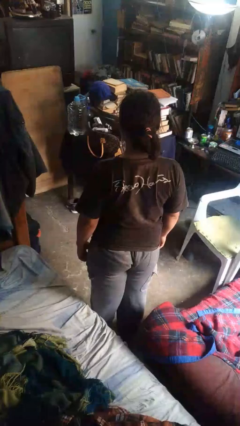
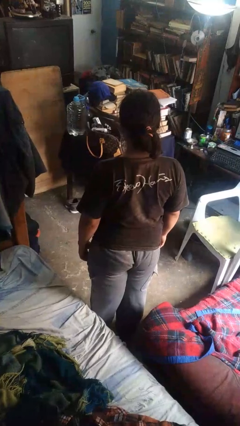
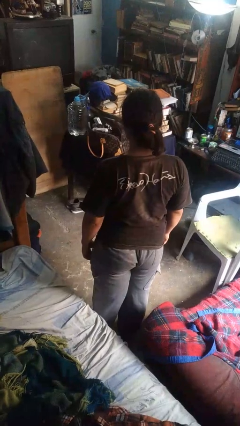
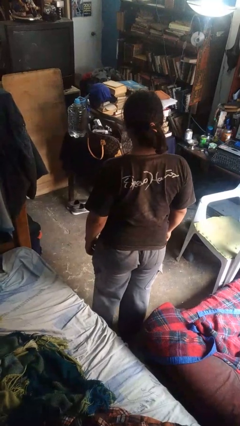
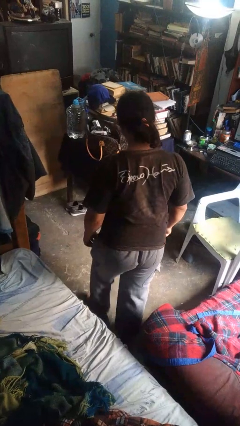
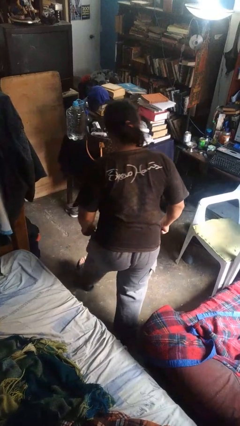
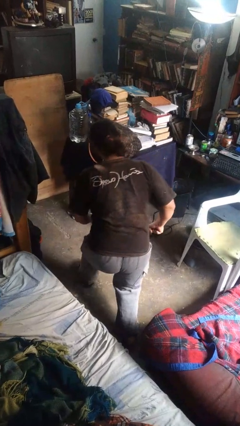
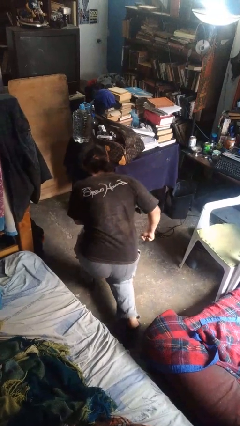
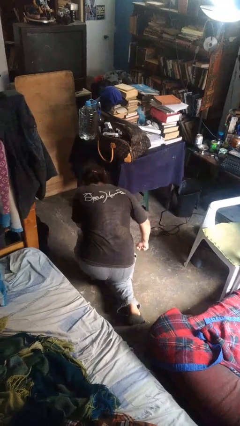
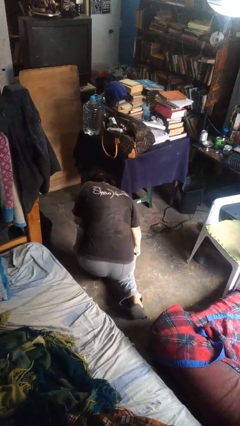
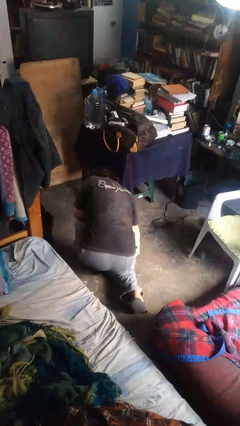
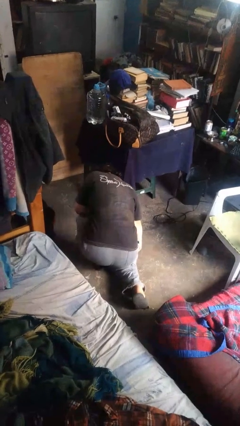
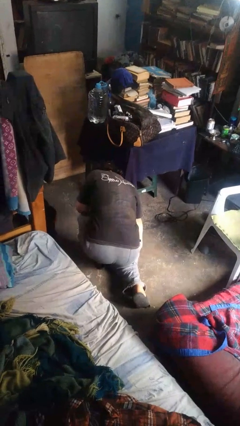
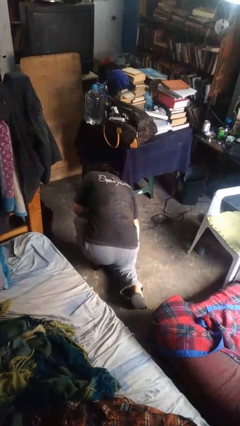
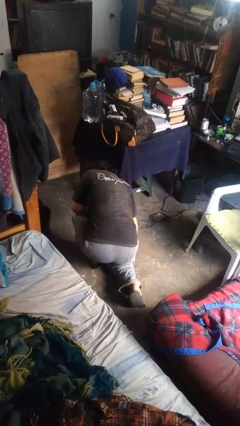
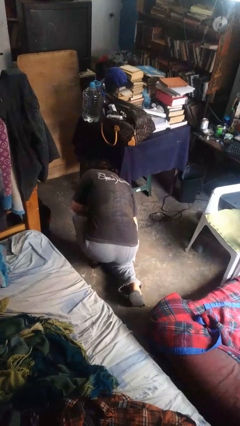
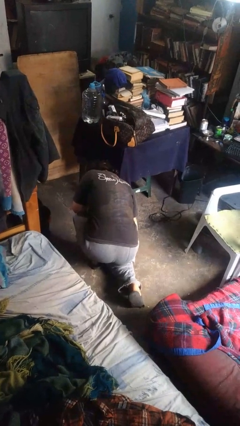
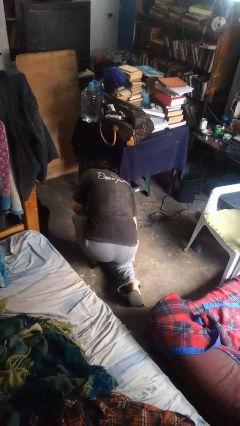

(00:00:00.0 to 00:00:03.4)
person kneels

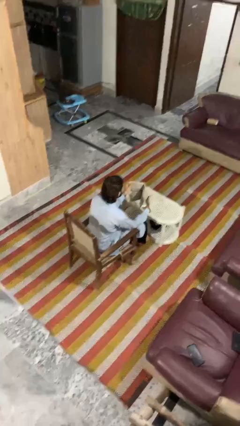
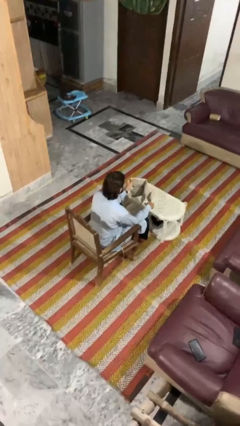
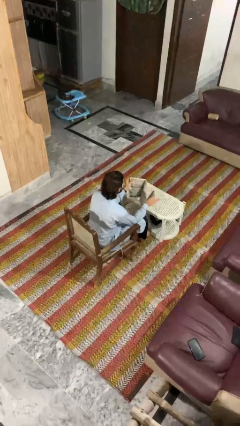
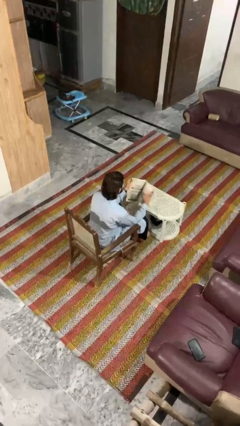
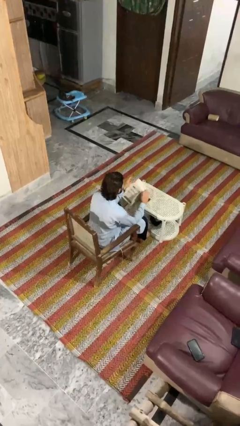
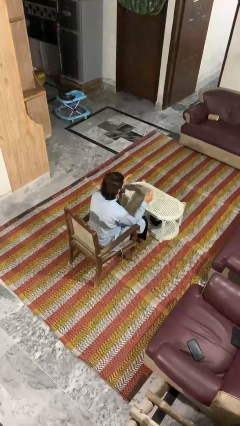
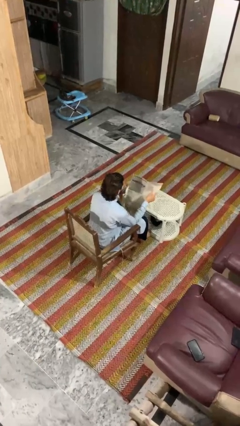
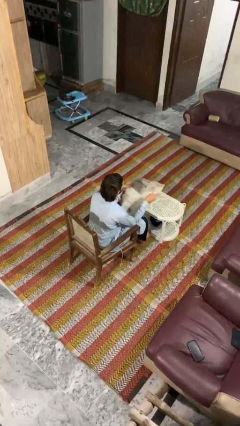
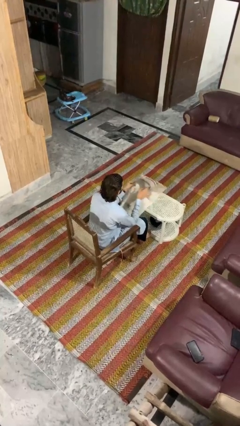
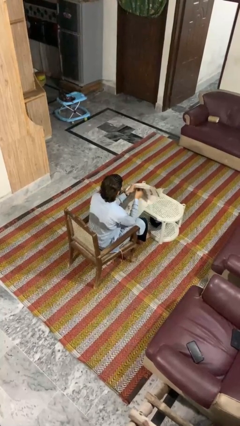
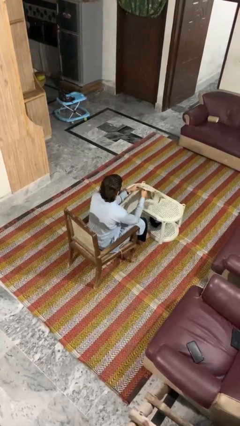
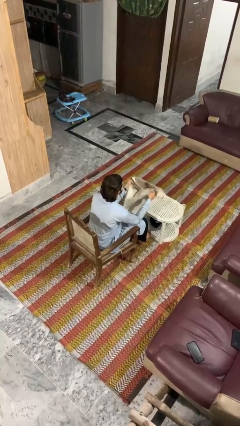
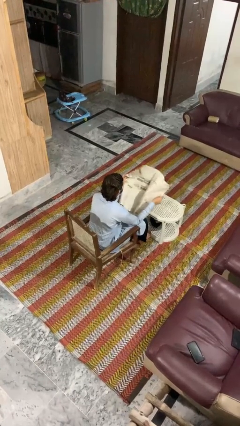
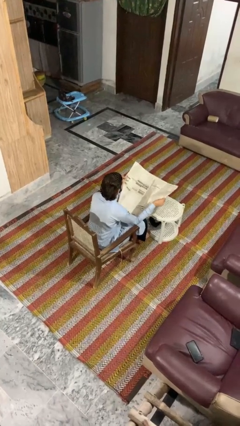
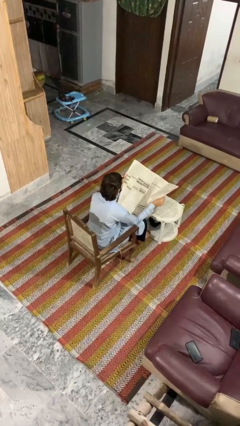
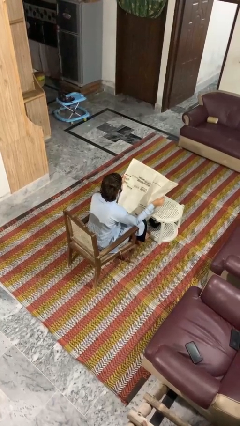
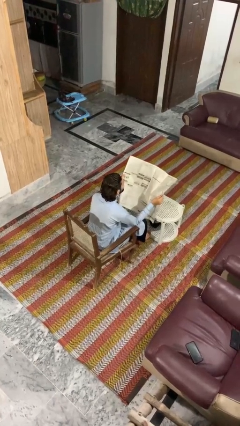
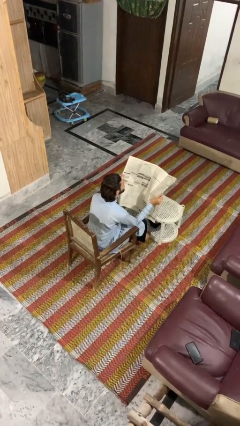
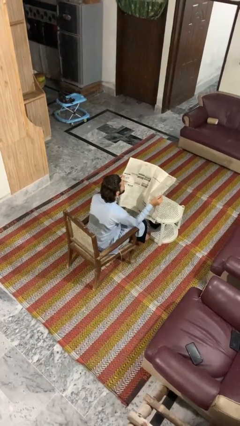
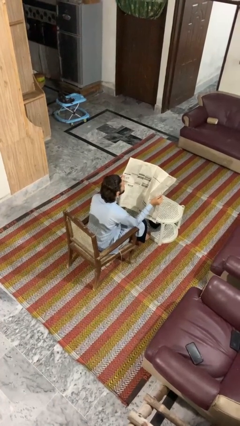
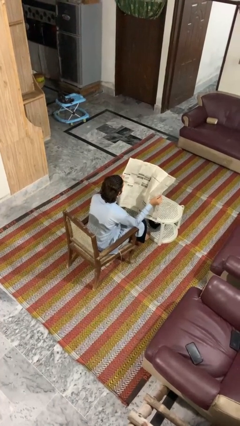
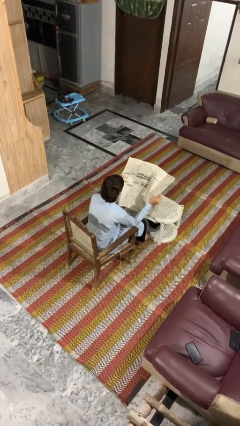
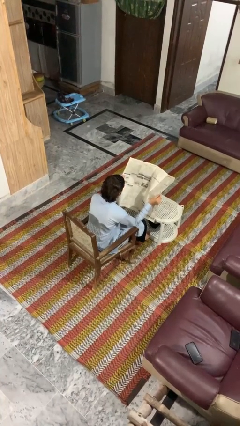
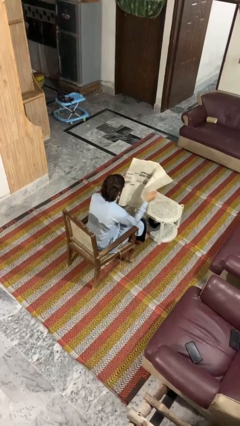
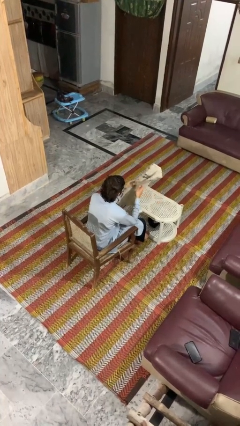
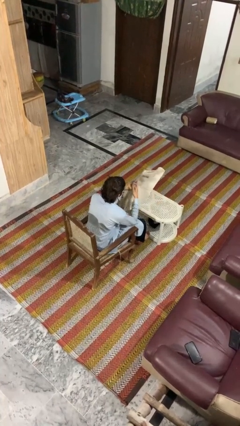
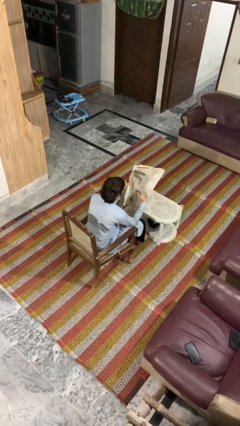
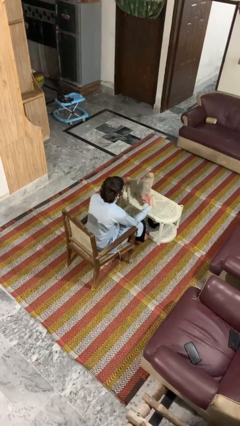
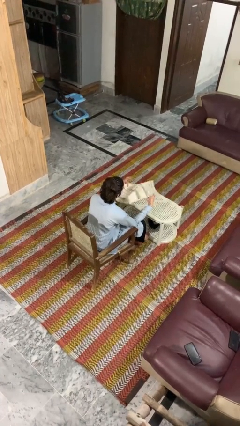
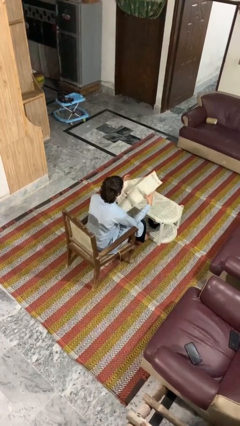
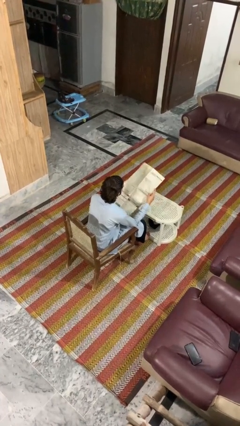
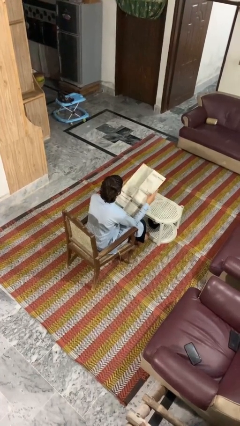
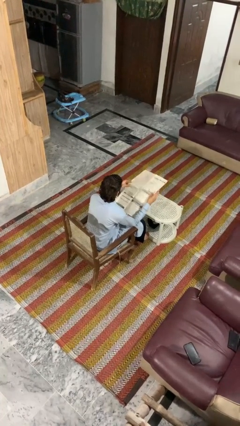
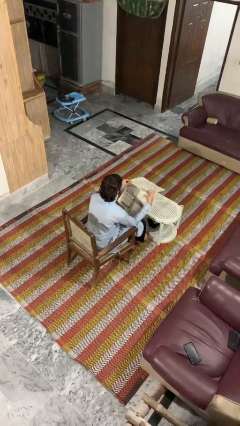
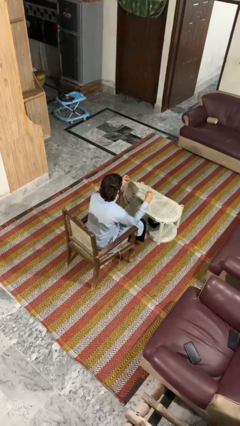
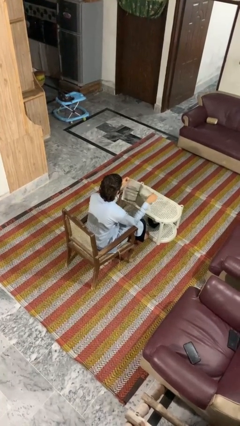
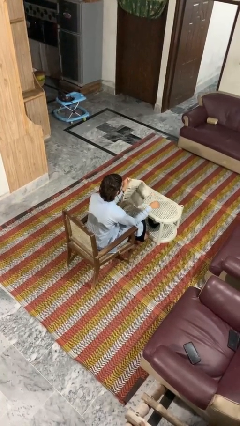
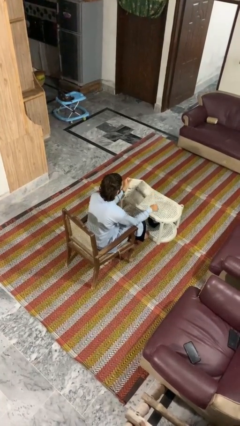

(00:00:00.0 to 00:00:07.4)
person reads newspaper

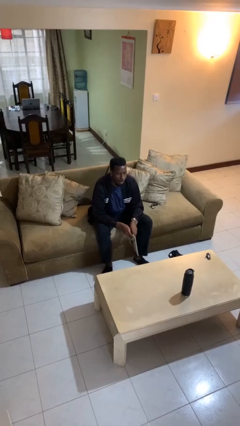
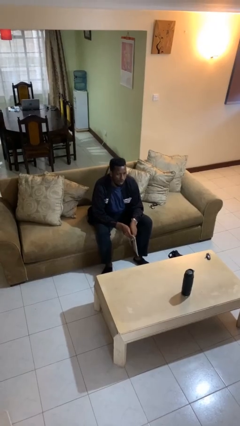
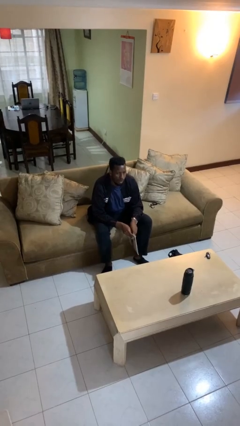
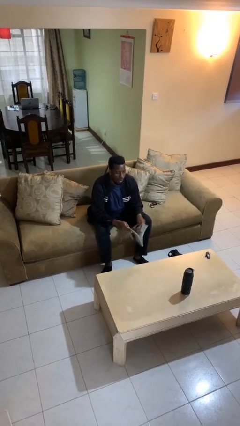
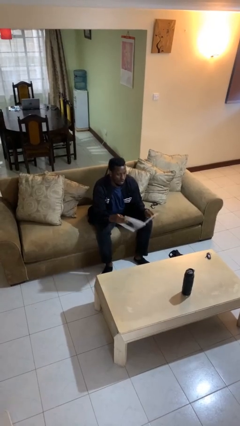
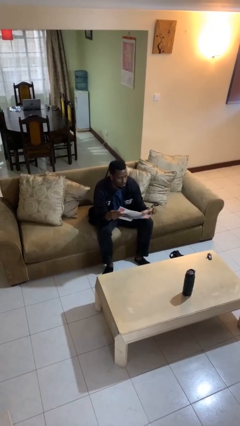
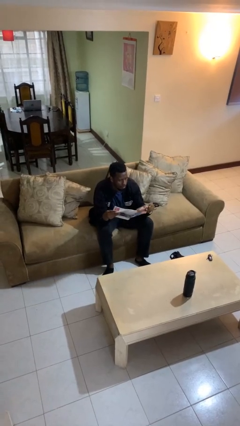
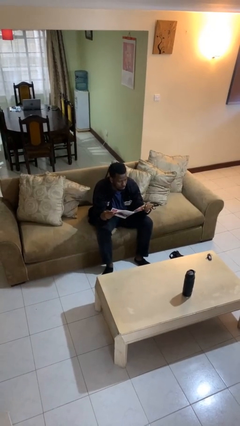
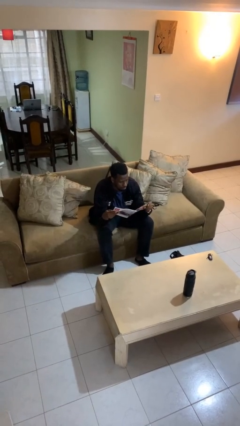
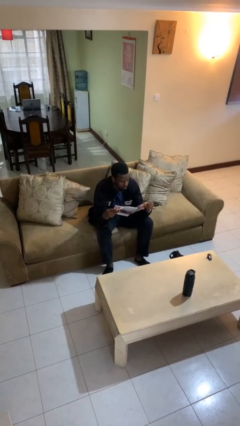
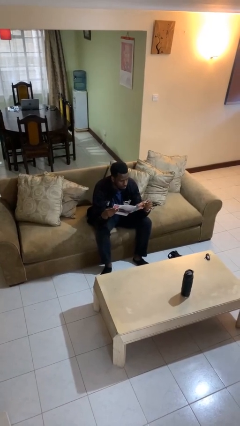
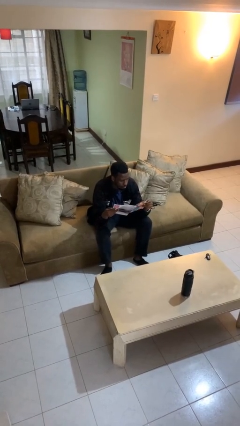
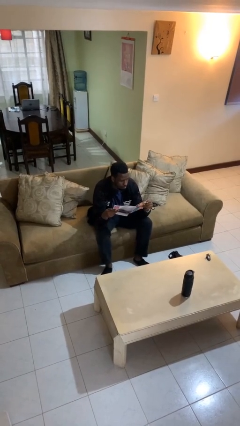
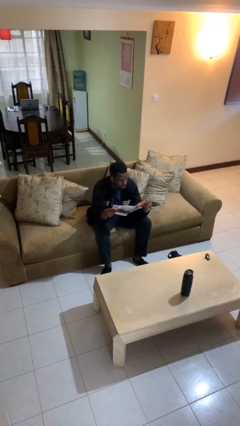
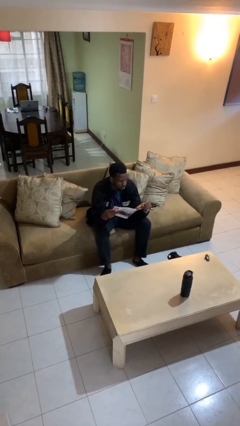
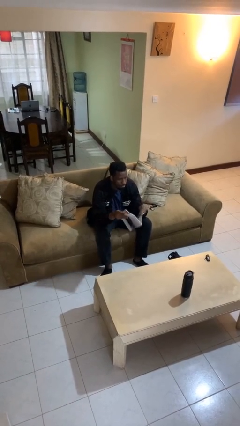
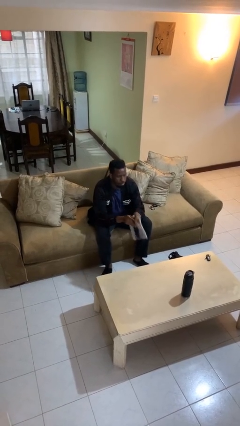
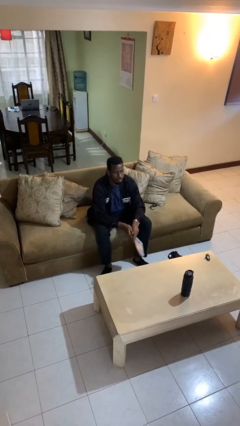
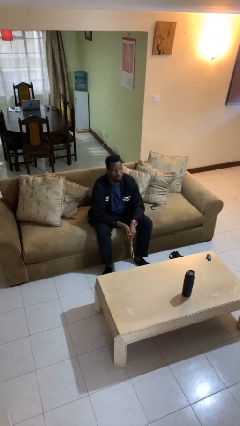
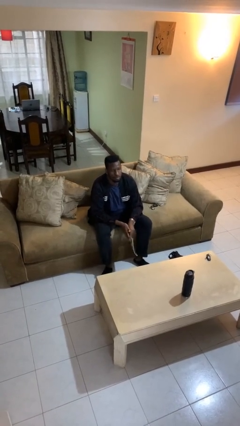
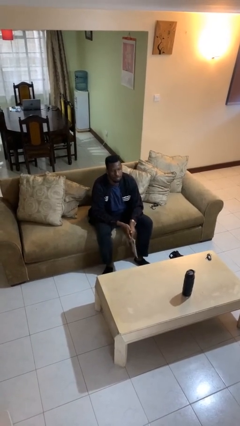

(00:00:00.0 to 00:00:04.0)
person reads magazine

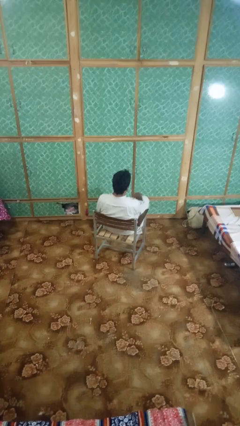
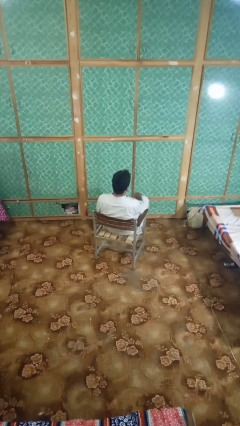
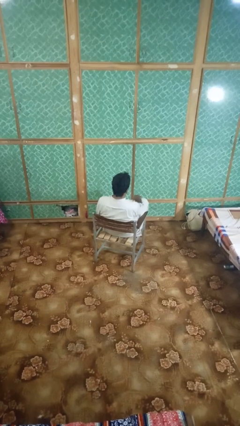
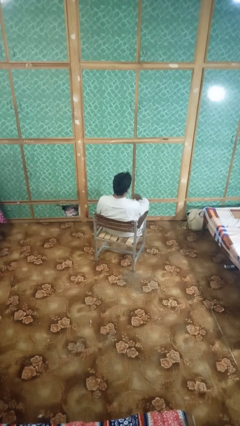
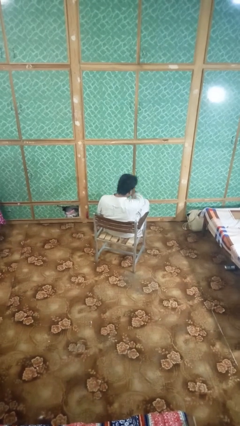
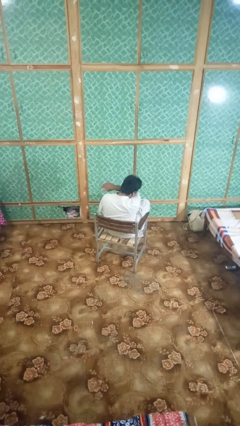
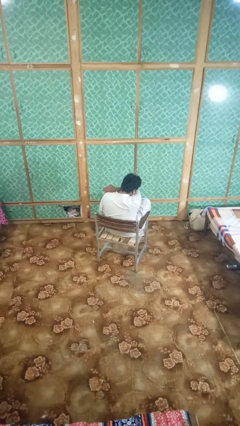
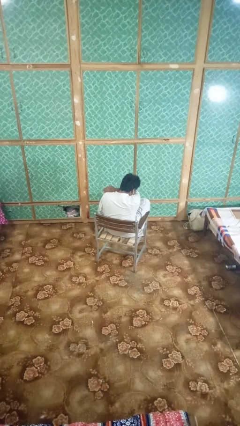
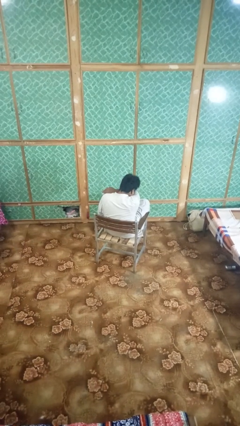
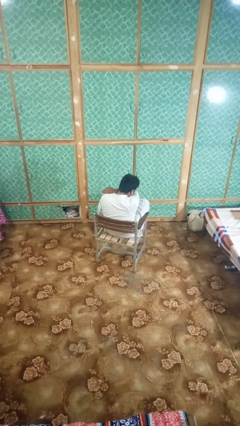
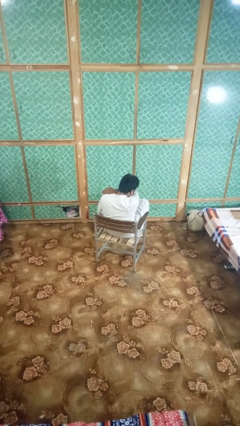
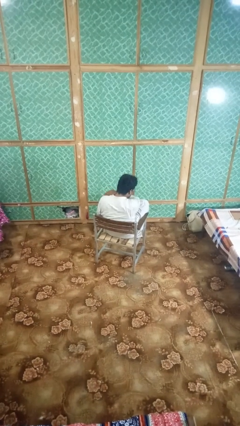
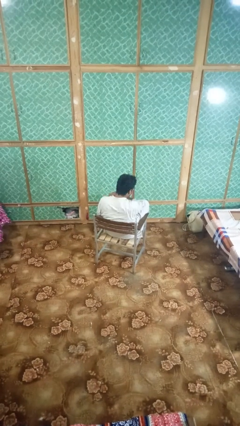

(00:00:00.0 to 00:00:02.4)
person sneezes into arm

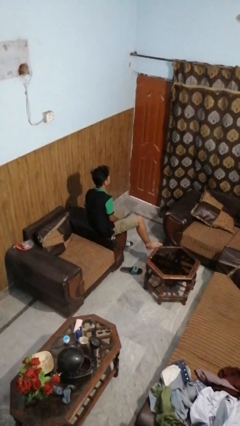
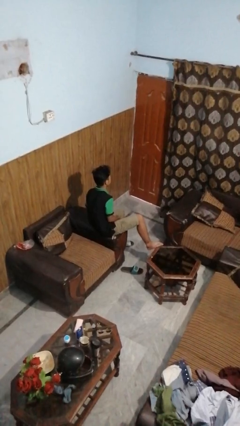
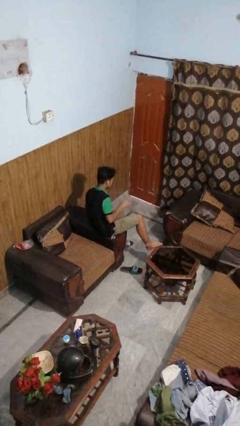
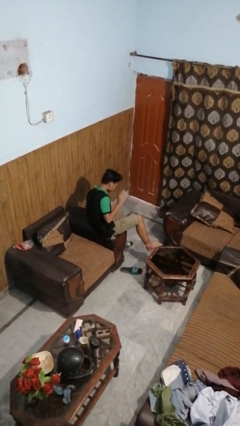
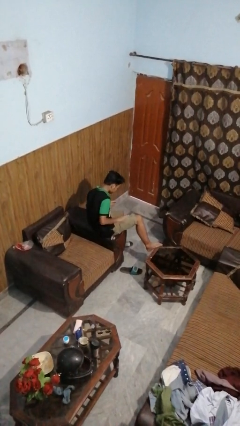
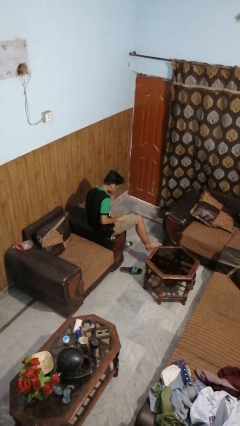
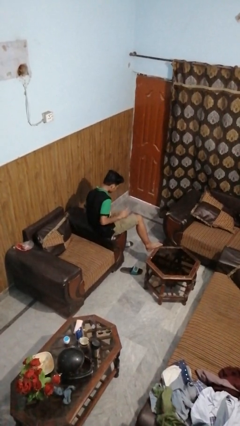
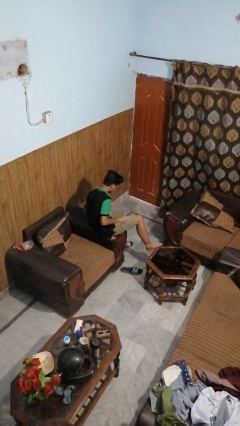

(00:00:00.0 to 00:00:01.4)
person slaps hands on thighs
